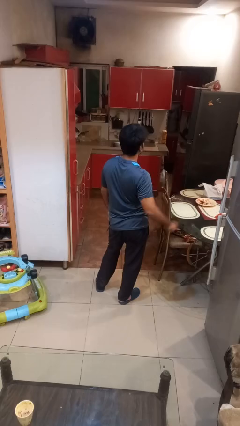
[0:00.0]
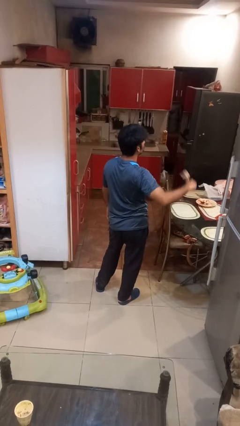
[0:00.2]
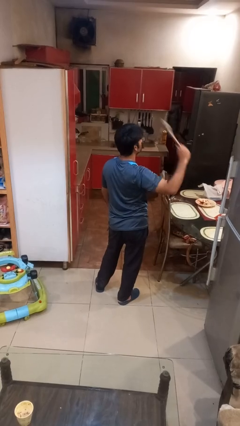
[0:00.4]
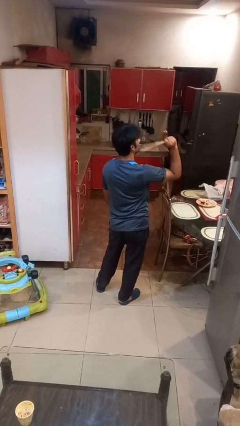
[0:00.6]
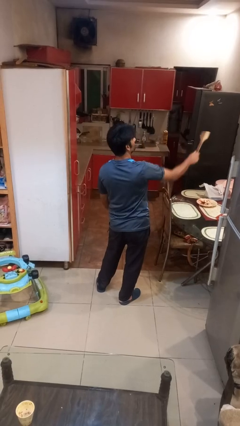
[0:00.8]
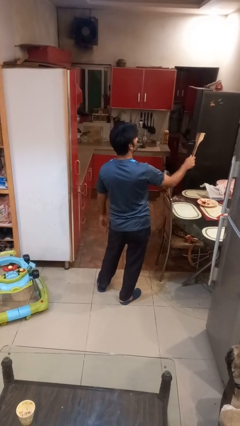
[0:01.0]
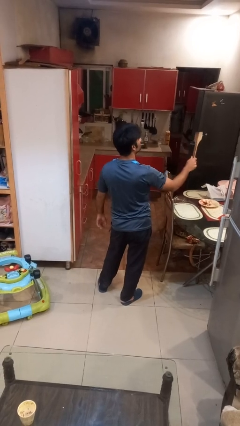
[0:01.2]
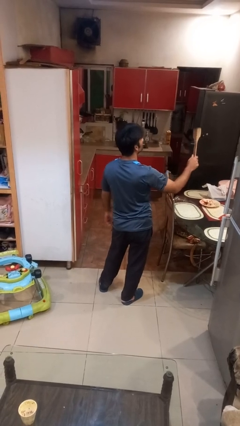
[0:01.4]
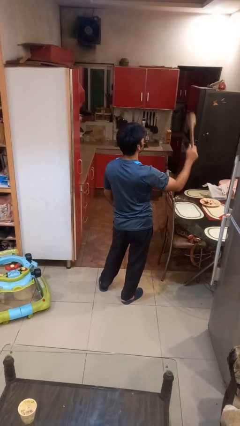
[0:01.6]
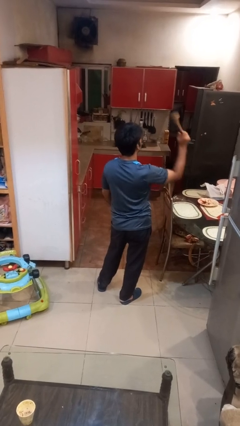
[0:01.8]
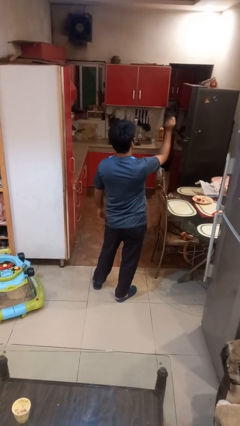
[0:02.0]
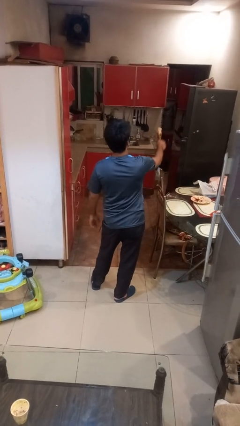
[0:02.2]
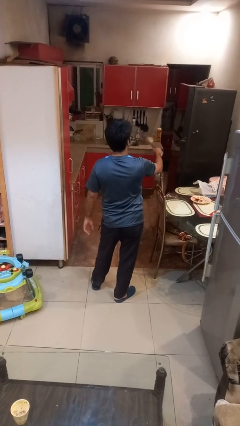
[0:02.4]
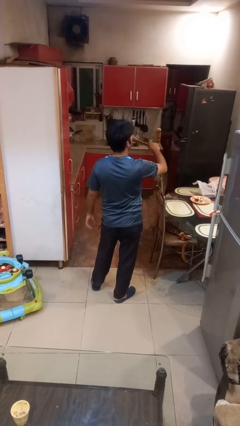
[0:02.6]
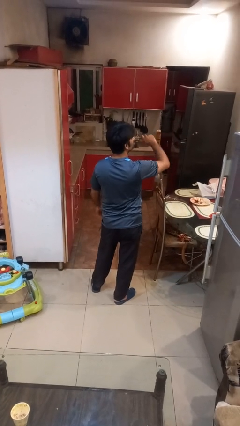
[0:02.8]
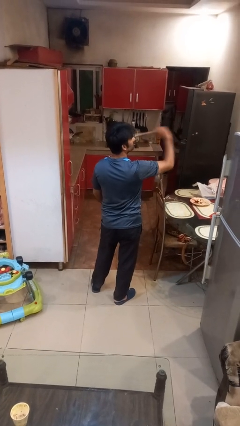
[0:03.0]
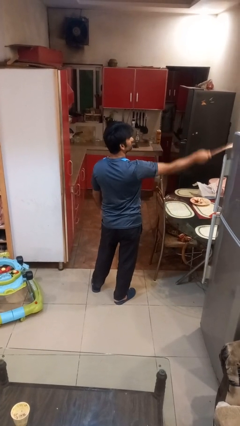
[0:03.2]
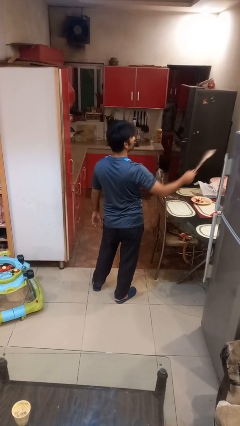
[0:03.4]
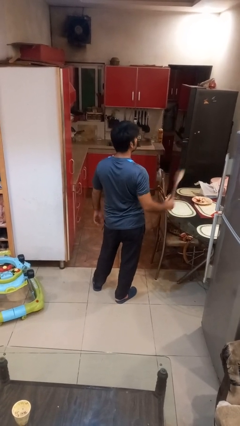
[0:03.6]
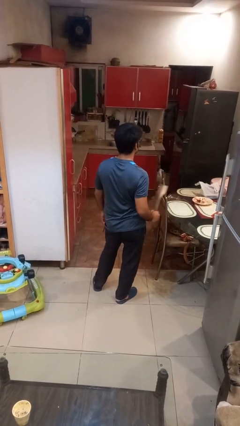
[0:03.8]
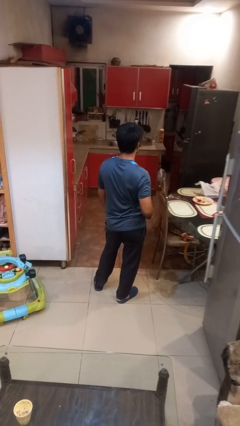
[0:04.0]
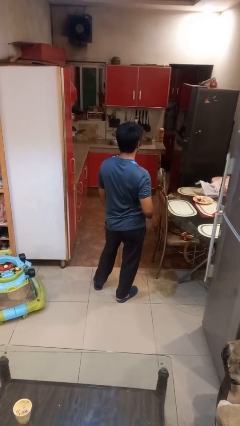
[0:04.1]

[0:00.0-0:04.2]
person swats bug

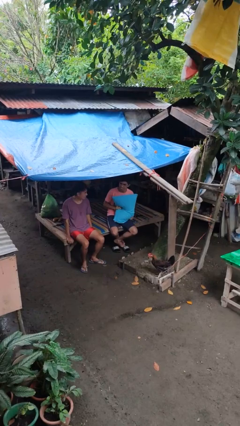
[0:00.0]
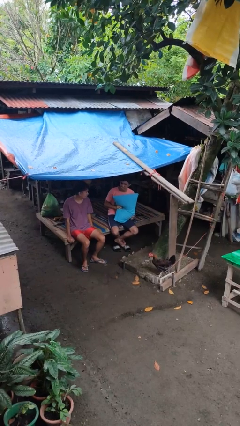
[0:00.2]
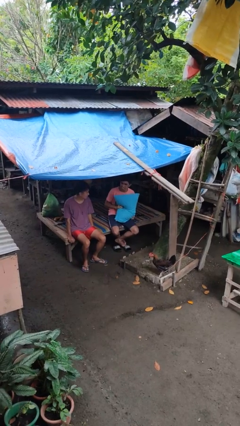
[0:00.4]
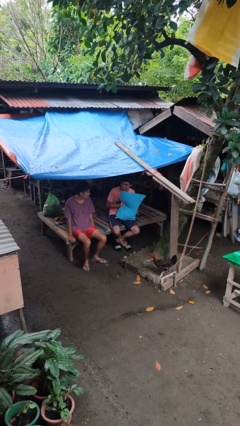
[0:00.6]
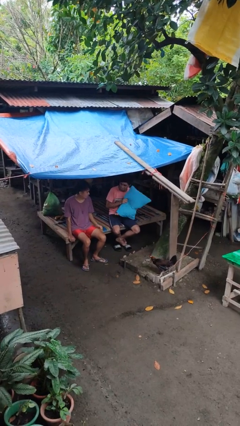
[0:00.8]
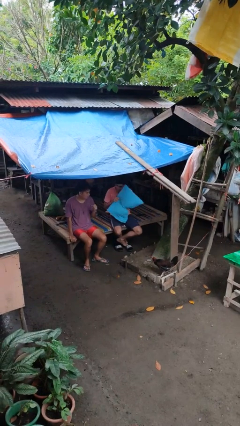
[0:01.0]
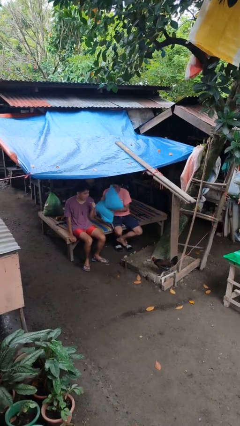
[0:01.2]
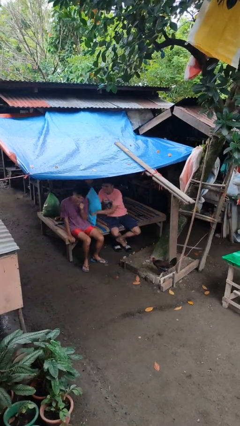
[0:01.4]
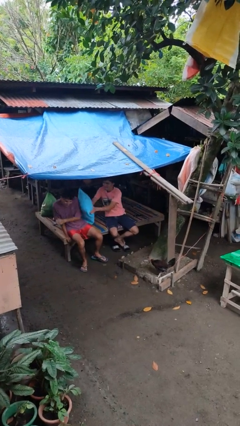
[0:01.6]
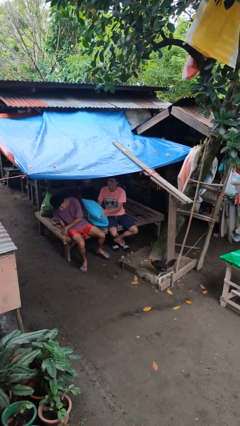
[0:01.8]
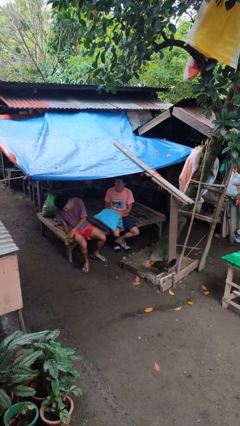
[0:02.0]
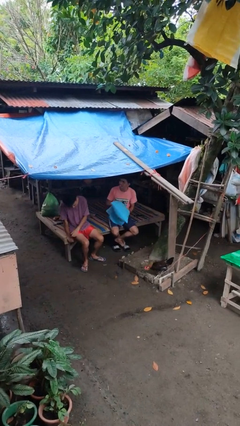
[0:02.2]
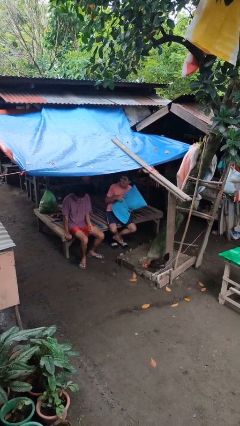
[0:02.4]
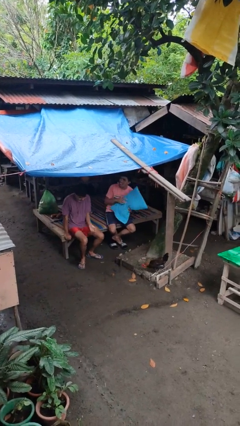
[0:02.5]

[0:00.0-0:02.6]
person hits person with pillow

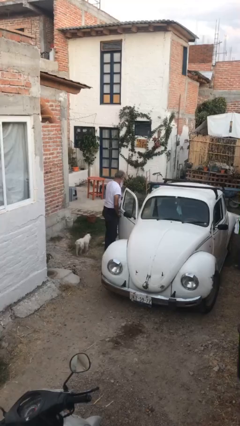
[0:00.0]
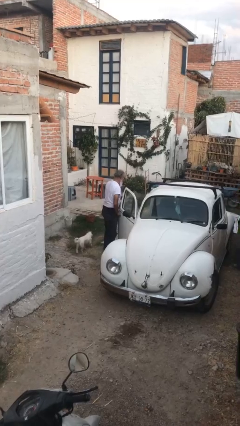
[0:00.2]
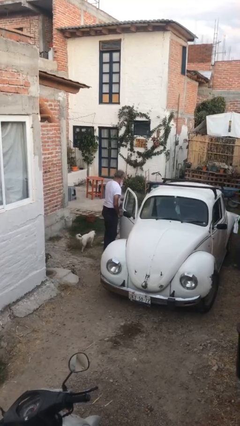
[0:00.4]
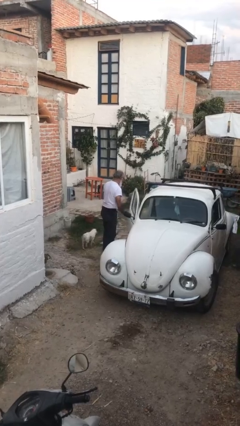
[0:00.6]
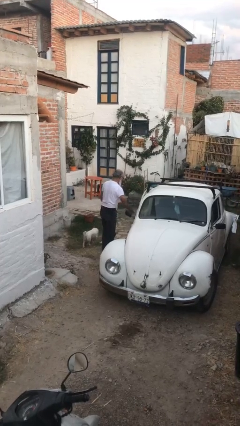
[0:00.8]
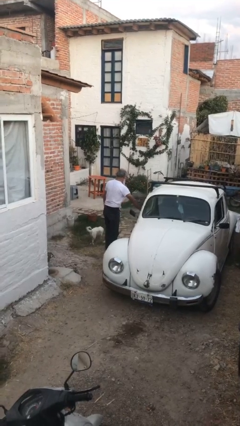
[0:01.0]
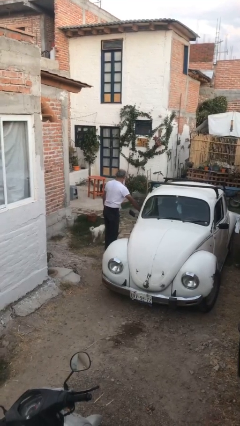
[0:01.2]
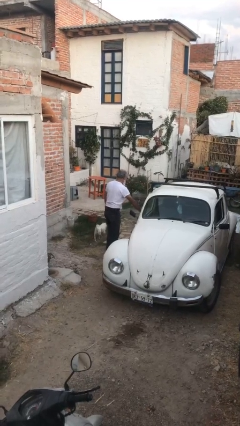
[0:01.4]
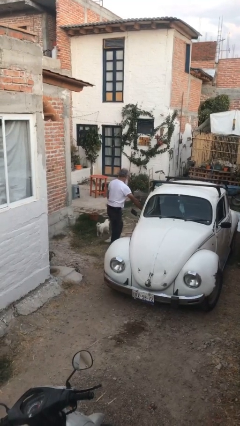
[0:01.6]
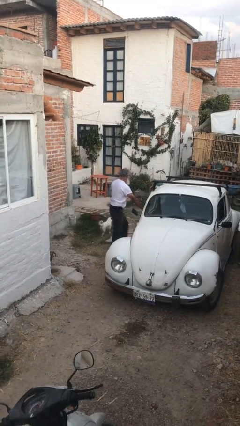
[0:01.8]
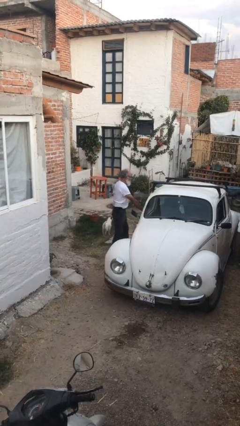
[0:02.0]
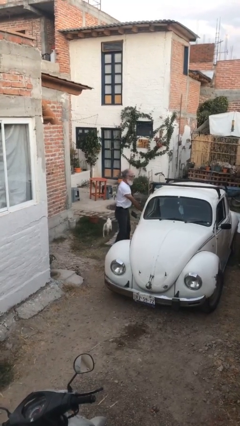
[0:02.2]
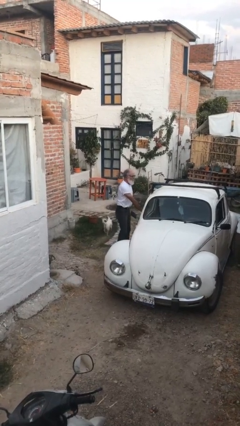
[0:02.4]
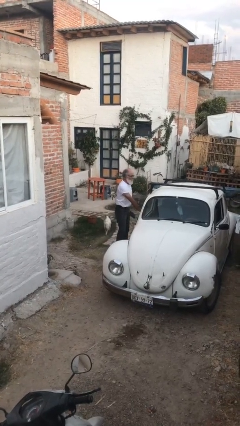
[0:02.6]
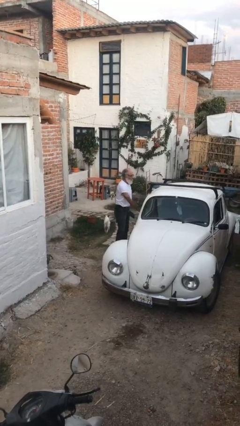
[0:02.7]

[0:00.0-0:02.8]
person closes car door

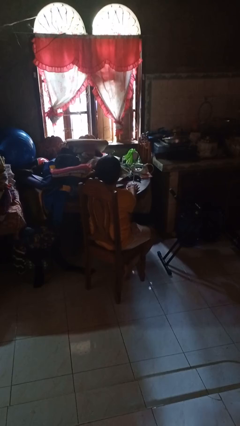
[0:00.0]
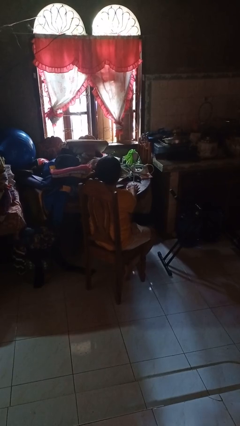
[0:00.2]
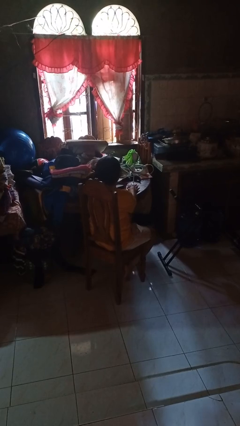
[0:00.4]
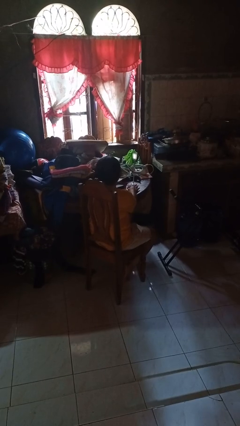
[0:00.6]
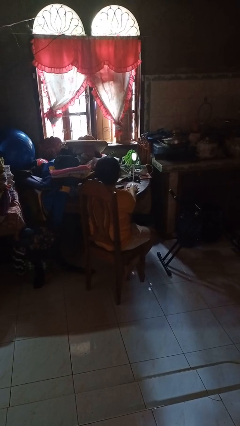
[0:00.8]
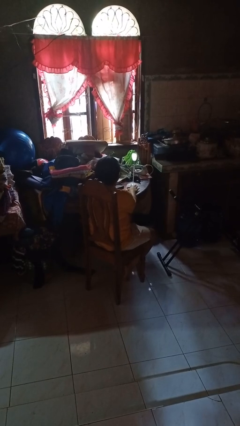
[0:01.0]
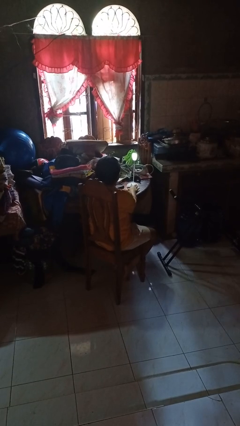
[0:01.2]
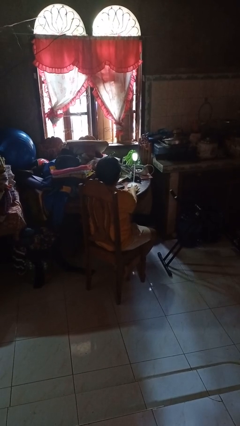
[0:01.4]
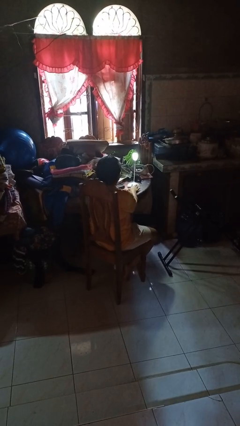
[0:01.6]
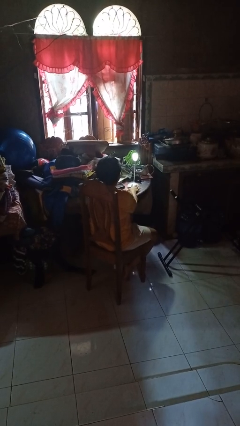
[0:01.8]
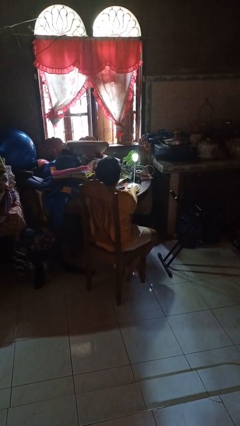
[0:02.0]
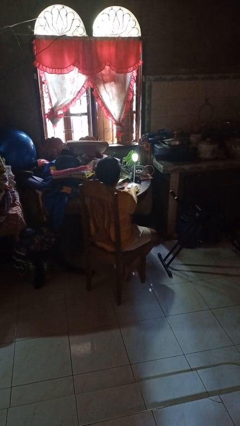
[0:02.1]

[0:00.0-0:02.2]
person turns on lamp

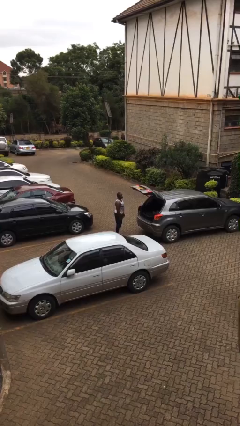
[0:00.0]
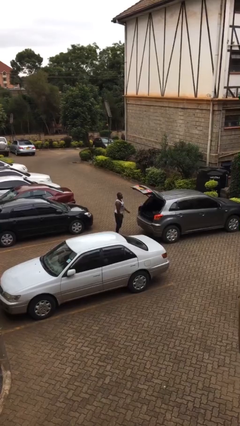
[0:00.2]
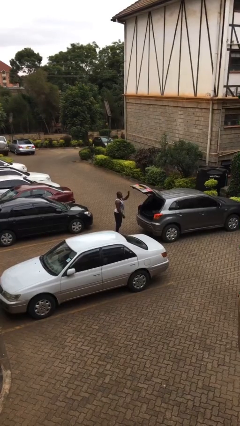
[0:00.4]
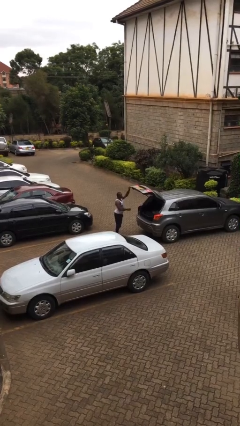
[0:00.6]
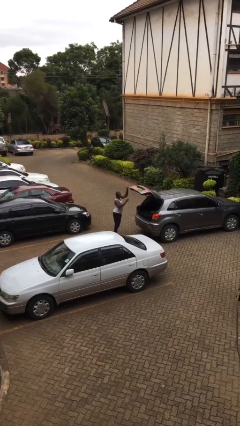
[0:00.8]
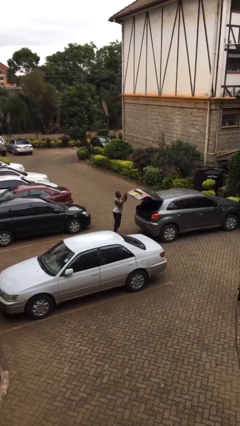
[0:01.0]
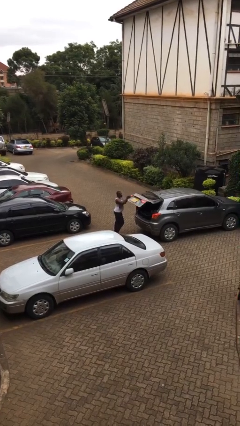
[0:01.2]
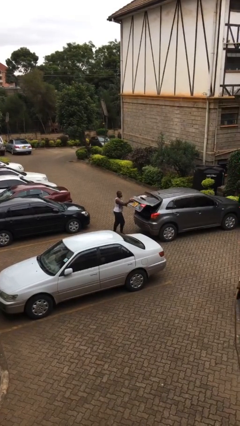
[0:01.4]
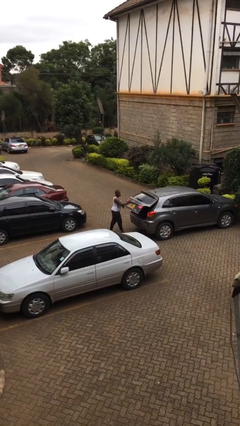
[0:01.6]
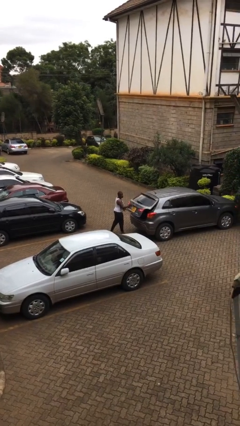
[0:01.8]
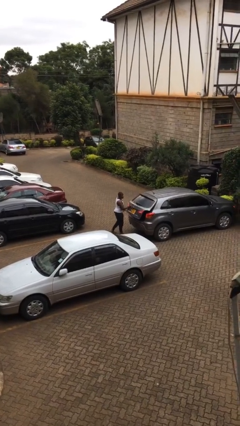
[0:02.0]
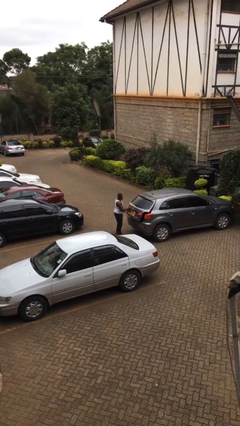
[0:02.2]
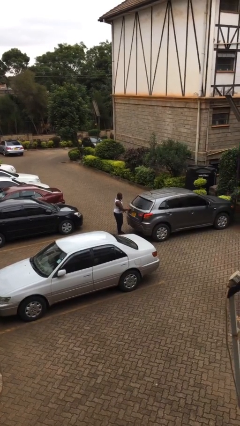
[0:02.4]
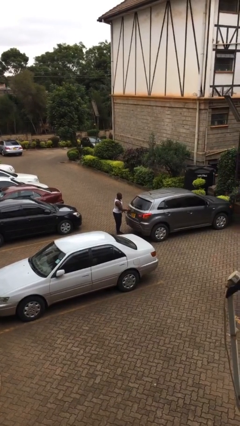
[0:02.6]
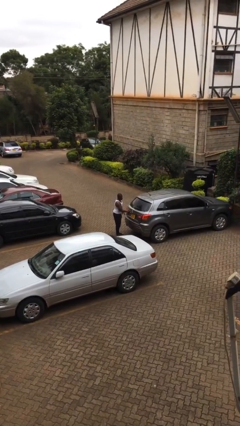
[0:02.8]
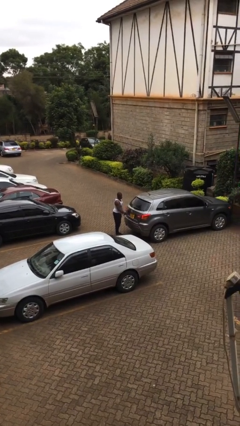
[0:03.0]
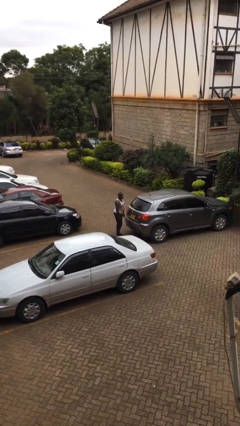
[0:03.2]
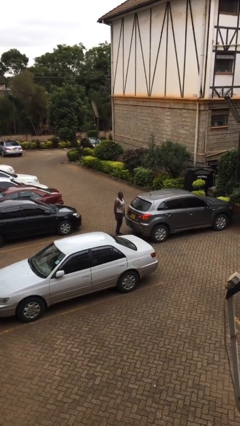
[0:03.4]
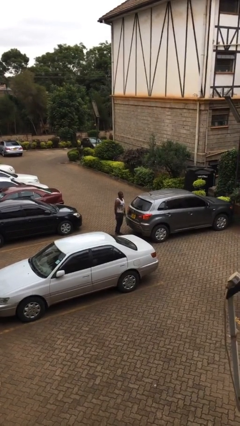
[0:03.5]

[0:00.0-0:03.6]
person closes car trunk

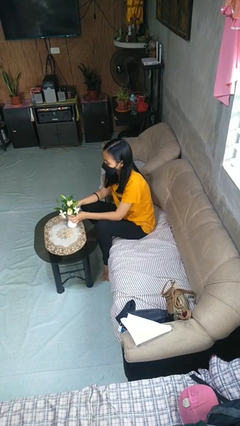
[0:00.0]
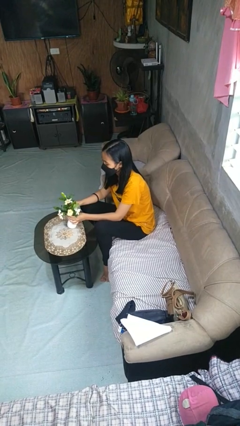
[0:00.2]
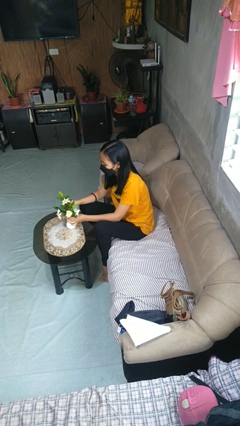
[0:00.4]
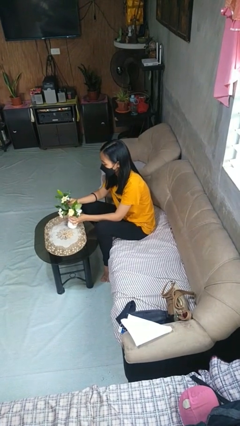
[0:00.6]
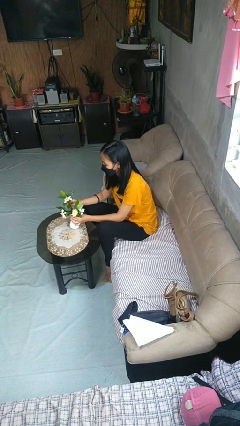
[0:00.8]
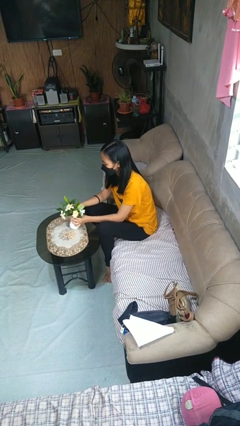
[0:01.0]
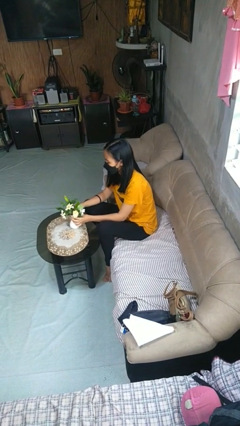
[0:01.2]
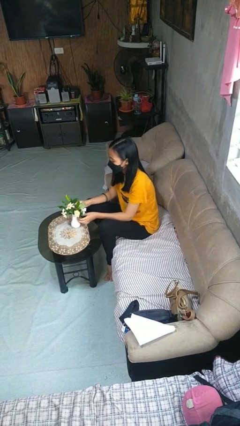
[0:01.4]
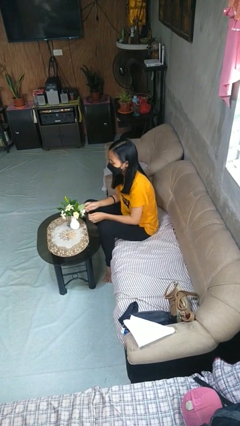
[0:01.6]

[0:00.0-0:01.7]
person arranges flowers in vase

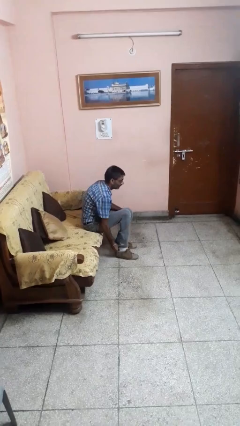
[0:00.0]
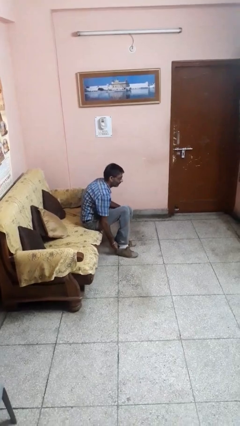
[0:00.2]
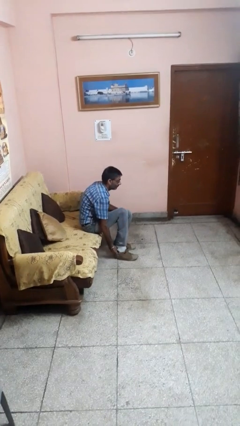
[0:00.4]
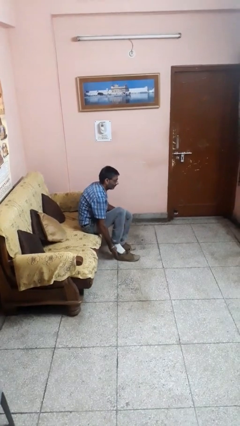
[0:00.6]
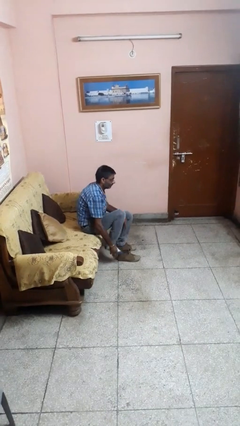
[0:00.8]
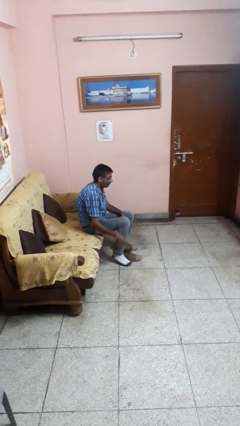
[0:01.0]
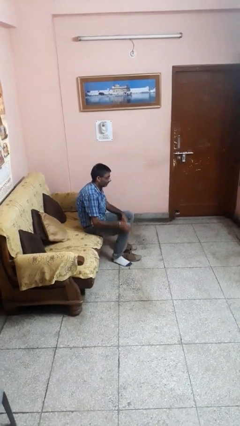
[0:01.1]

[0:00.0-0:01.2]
person takes off shoes
